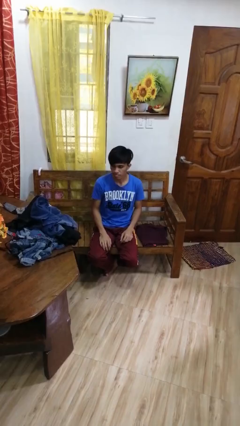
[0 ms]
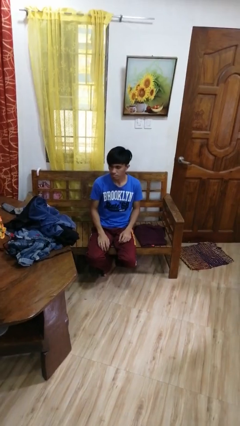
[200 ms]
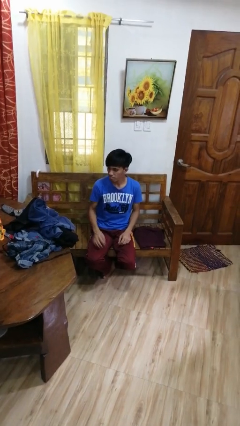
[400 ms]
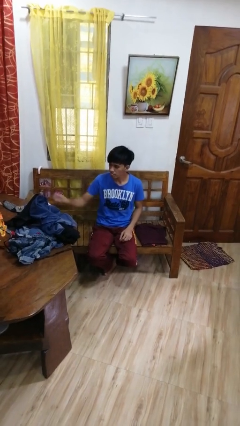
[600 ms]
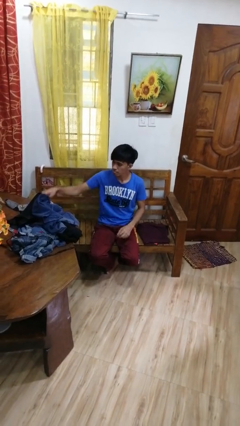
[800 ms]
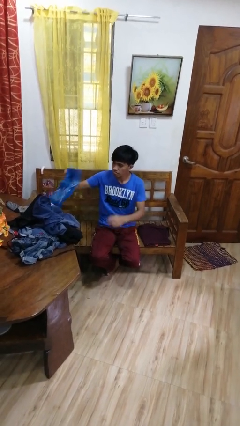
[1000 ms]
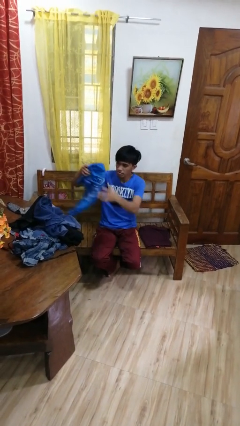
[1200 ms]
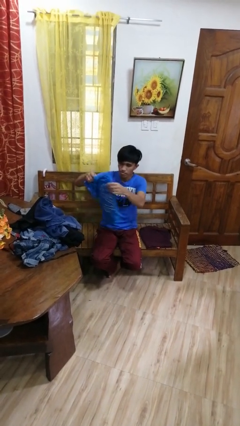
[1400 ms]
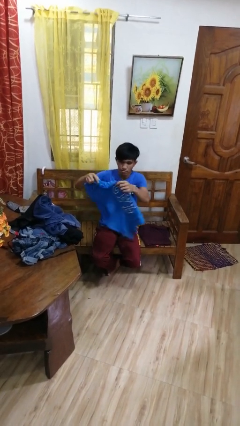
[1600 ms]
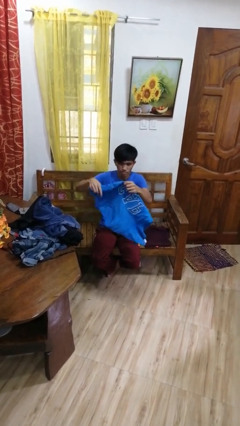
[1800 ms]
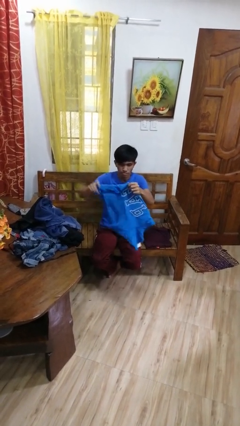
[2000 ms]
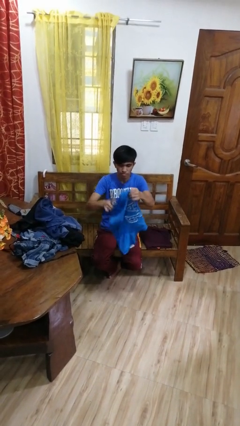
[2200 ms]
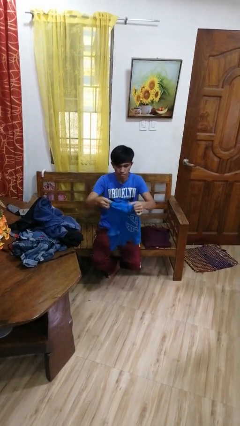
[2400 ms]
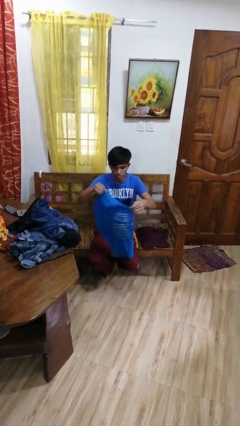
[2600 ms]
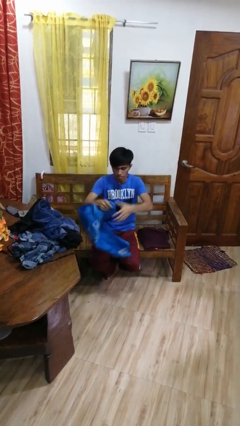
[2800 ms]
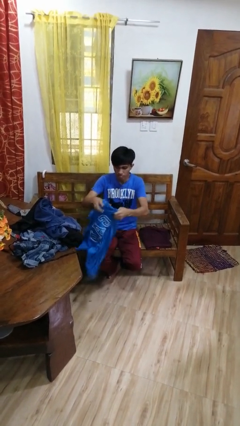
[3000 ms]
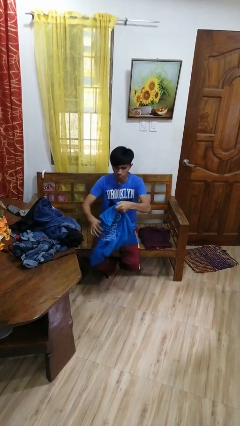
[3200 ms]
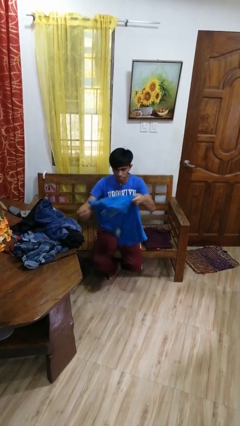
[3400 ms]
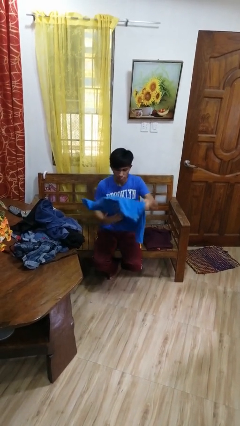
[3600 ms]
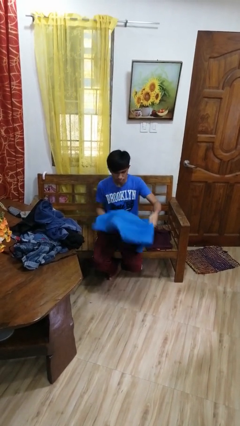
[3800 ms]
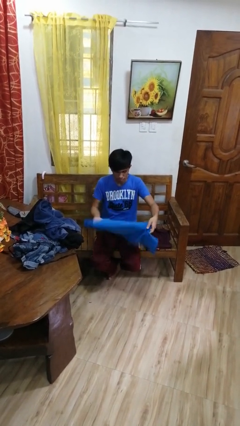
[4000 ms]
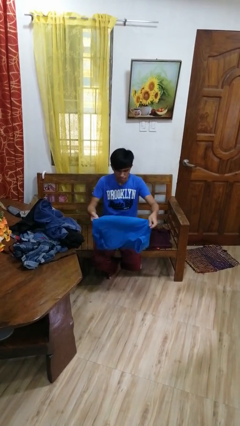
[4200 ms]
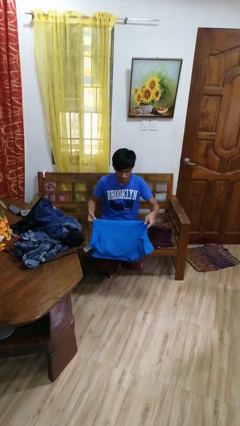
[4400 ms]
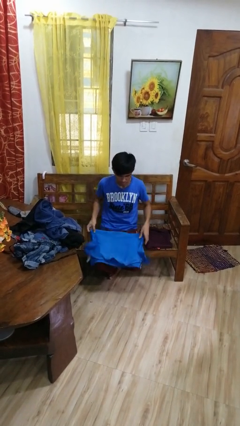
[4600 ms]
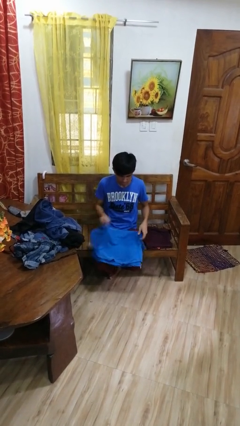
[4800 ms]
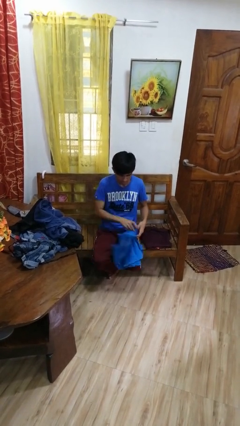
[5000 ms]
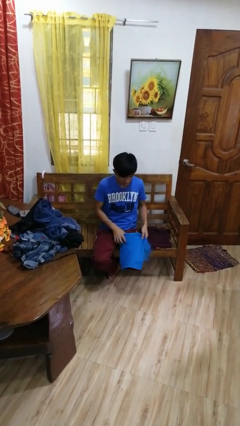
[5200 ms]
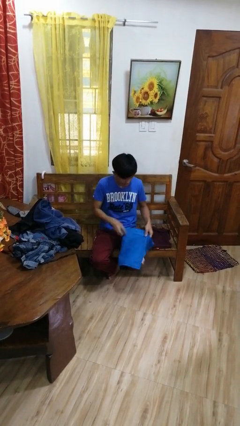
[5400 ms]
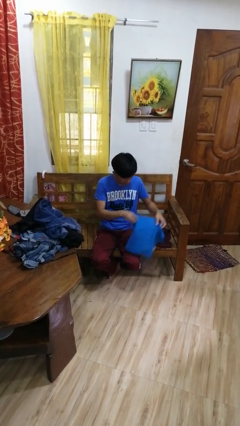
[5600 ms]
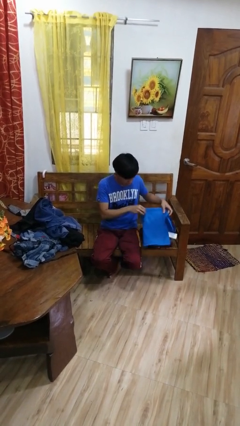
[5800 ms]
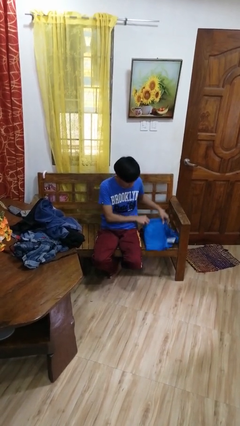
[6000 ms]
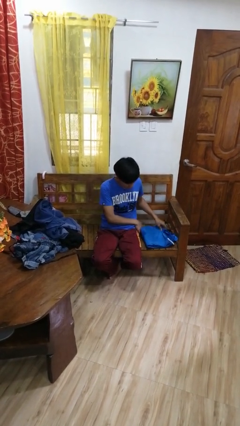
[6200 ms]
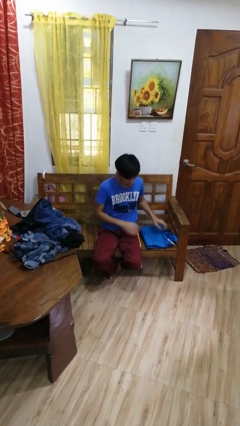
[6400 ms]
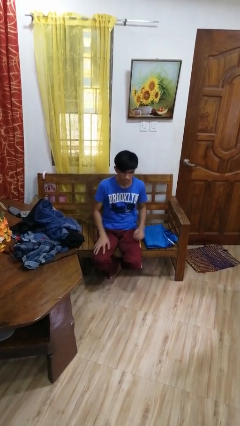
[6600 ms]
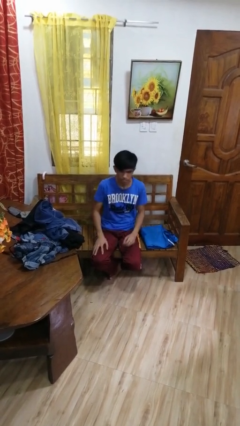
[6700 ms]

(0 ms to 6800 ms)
person folds shirt

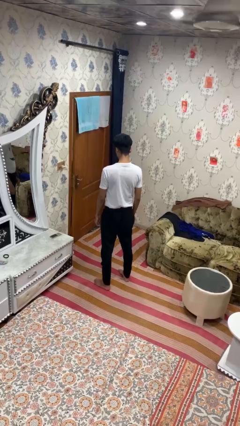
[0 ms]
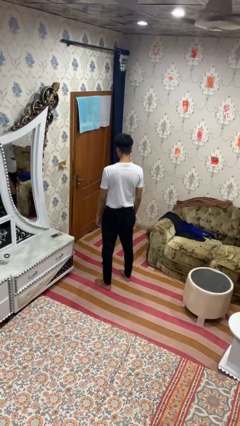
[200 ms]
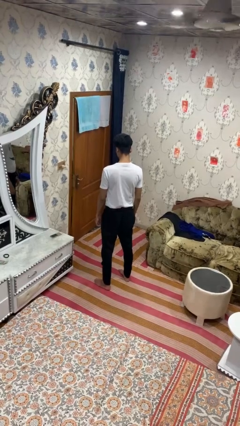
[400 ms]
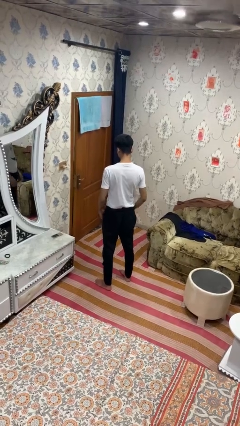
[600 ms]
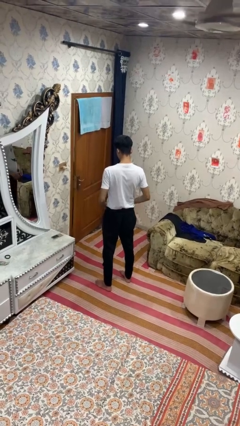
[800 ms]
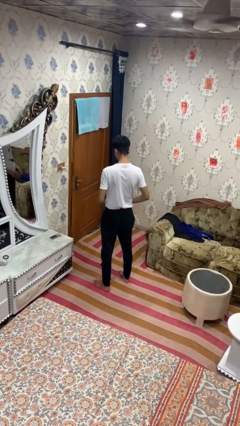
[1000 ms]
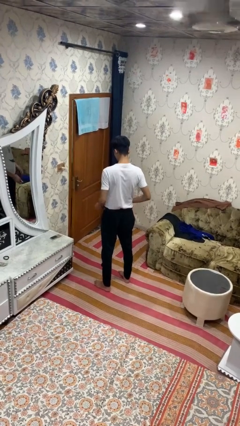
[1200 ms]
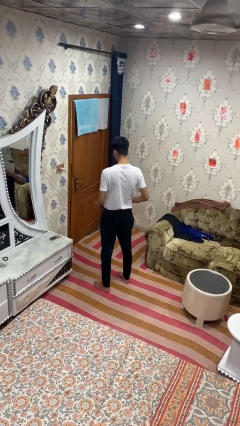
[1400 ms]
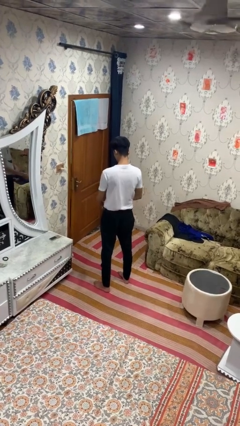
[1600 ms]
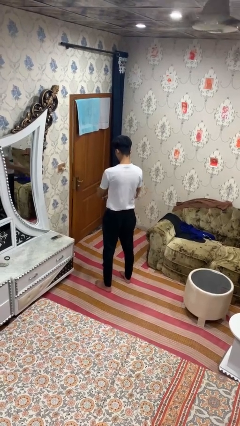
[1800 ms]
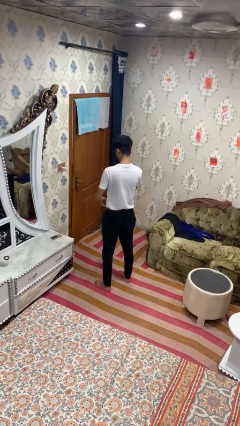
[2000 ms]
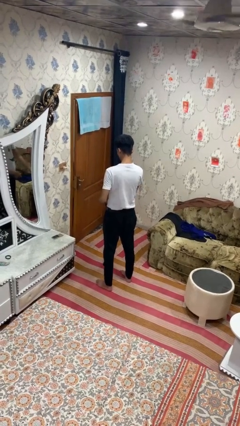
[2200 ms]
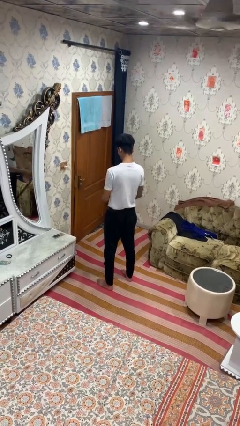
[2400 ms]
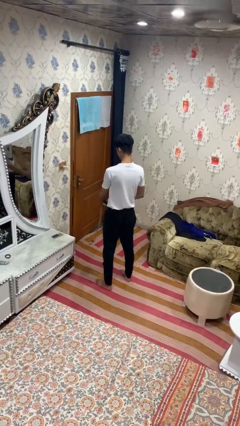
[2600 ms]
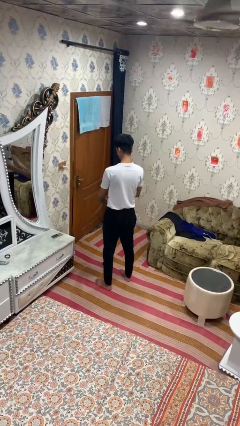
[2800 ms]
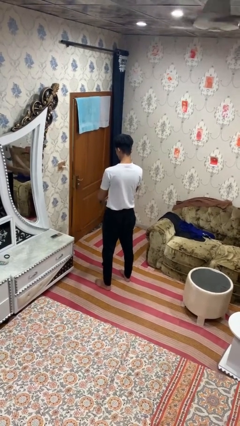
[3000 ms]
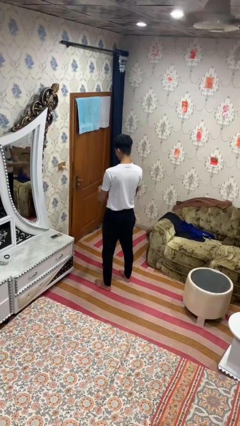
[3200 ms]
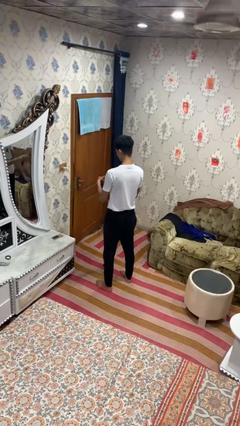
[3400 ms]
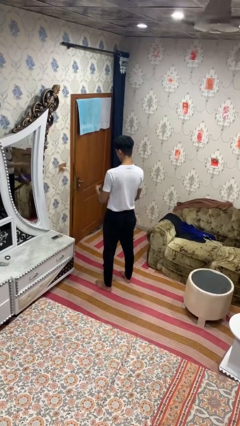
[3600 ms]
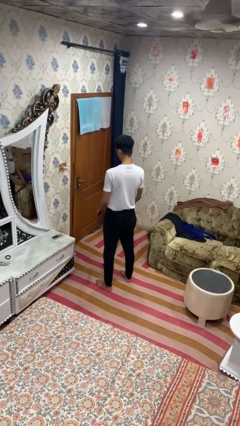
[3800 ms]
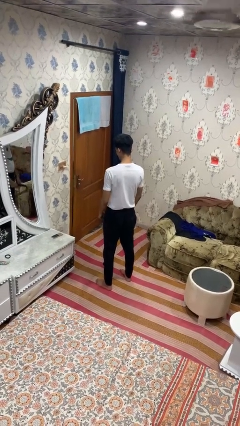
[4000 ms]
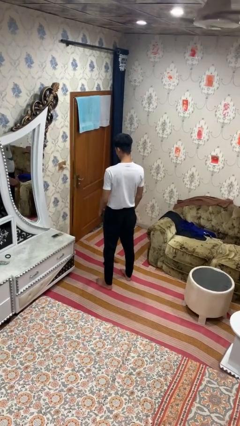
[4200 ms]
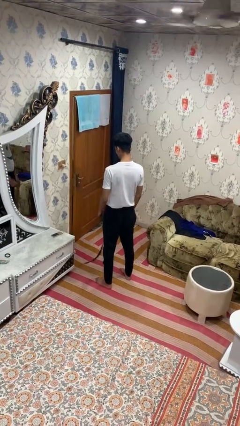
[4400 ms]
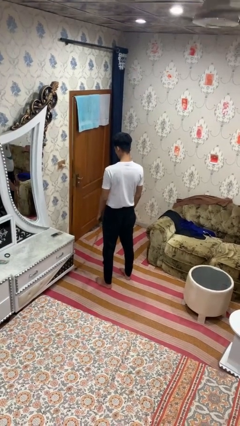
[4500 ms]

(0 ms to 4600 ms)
person takes off belt

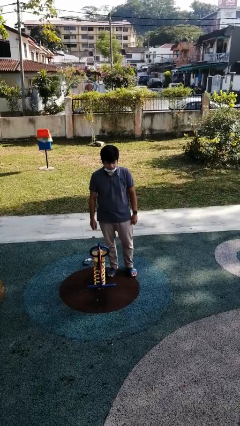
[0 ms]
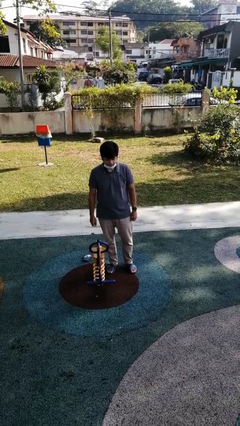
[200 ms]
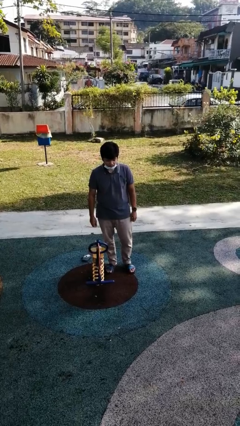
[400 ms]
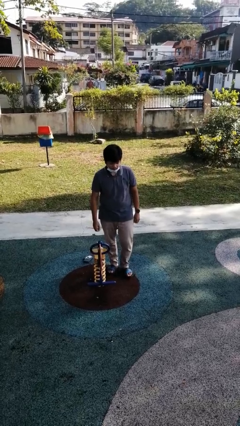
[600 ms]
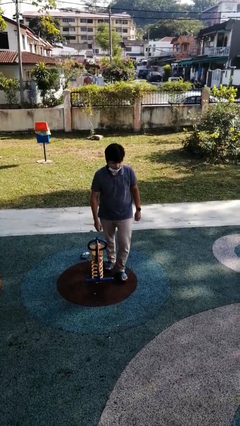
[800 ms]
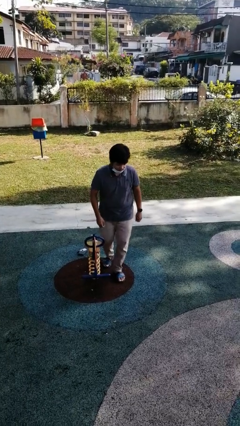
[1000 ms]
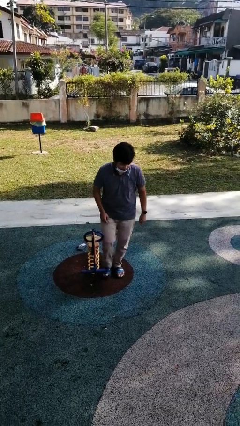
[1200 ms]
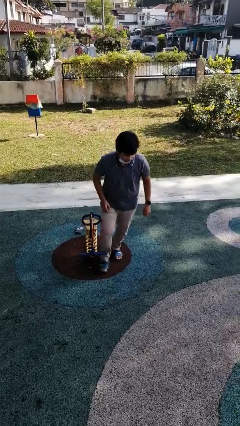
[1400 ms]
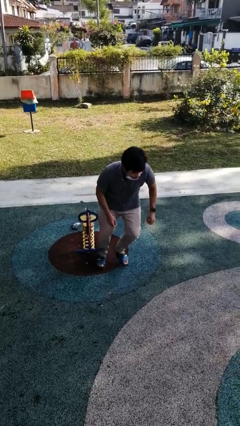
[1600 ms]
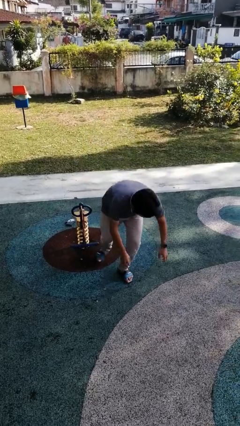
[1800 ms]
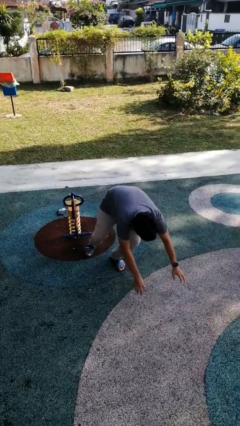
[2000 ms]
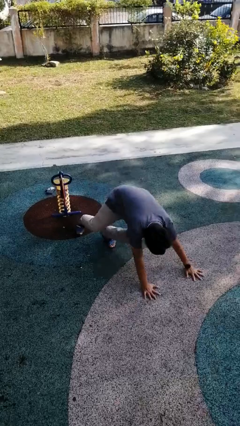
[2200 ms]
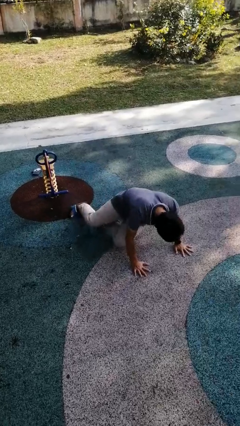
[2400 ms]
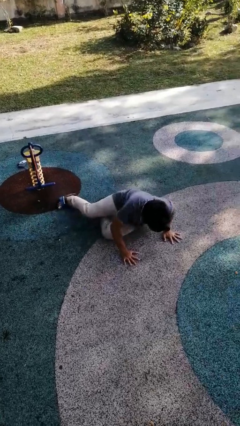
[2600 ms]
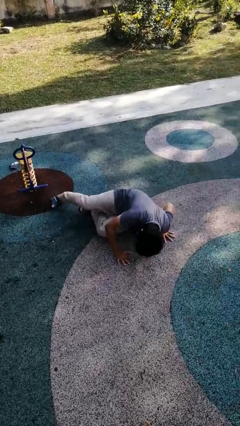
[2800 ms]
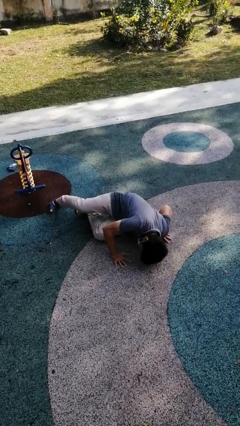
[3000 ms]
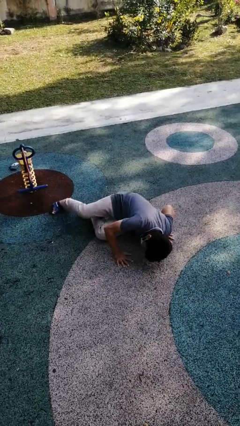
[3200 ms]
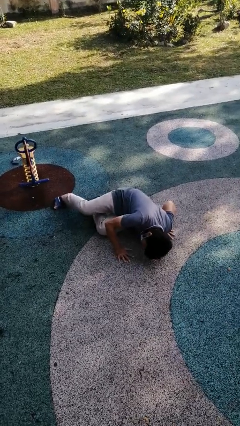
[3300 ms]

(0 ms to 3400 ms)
person trips on object on floor

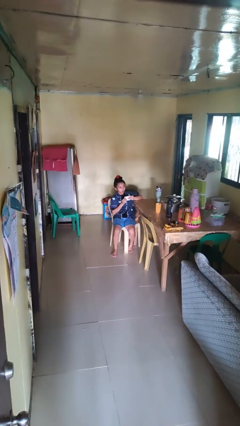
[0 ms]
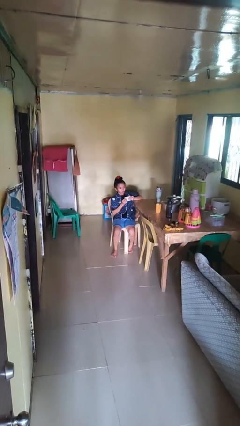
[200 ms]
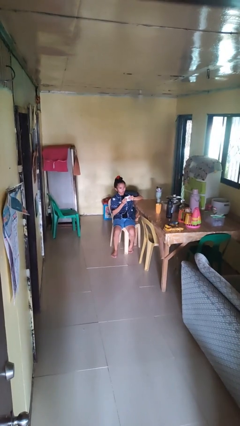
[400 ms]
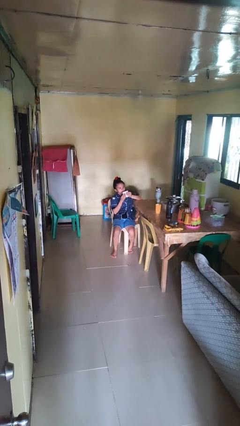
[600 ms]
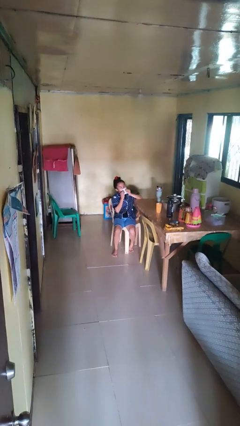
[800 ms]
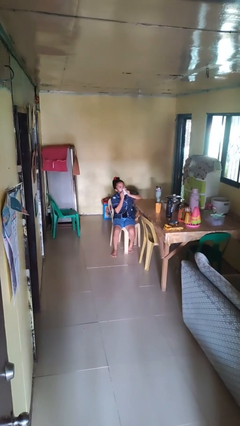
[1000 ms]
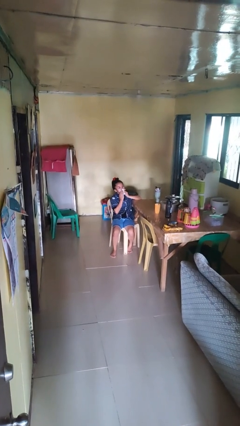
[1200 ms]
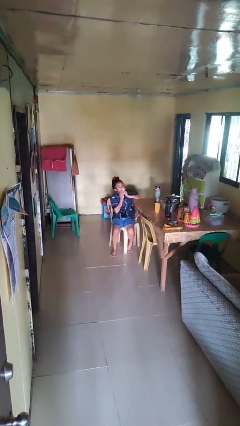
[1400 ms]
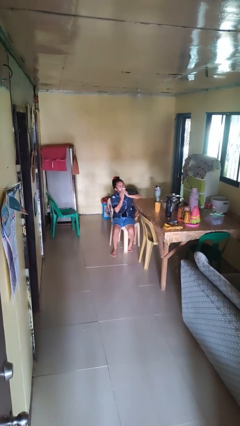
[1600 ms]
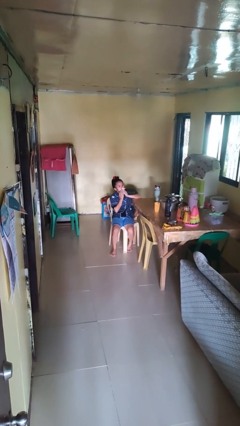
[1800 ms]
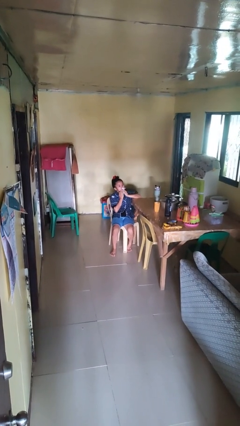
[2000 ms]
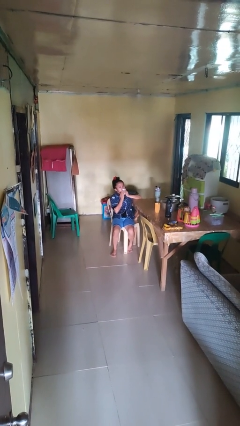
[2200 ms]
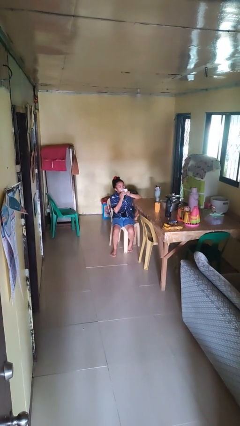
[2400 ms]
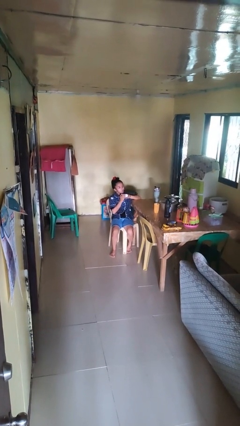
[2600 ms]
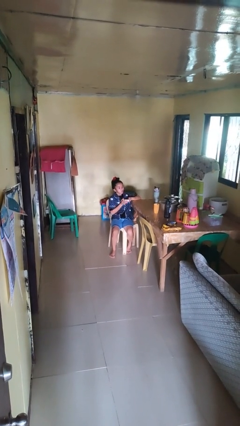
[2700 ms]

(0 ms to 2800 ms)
person wipes mouth with napkin

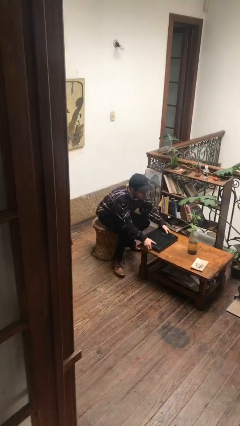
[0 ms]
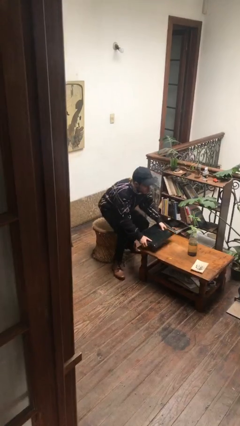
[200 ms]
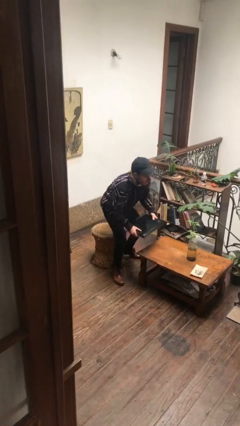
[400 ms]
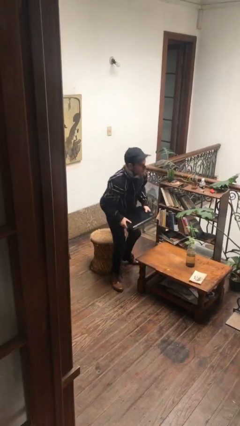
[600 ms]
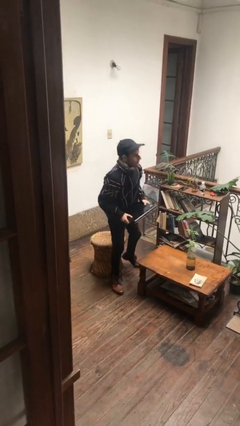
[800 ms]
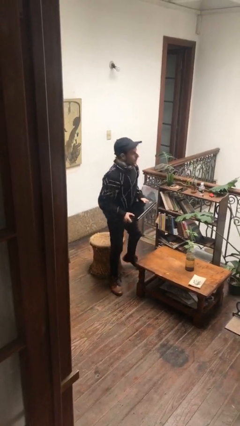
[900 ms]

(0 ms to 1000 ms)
person stands up
